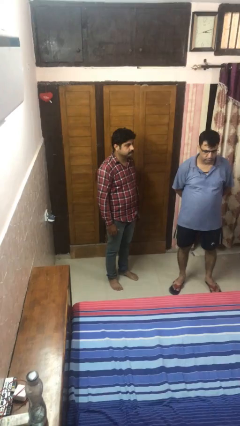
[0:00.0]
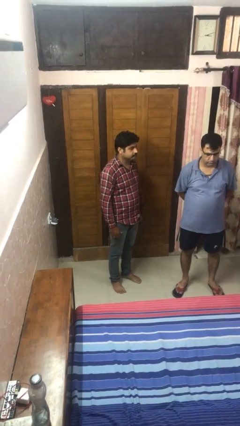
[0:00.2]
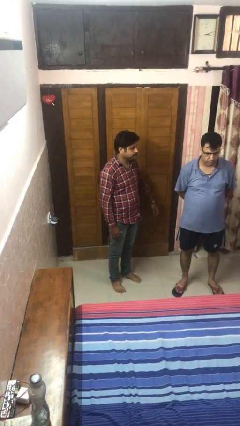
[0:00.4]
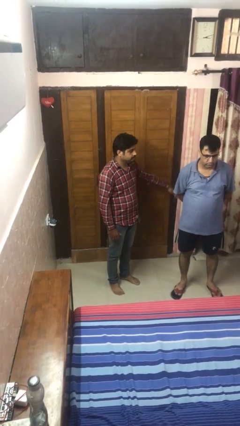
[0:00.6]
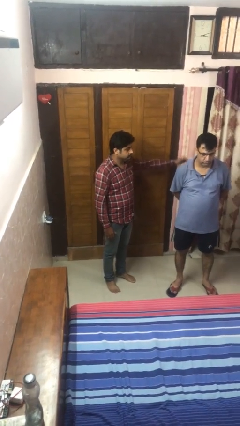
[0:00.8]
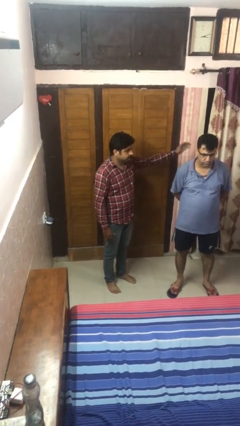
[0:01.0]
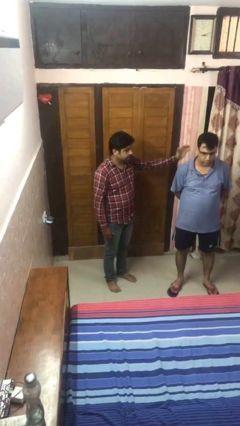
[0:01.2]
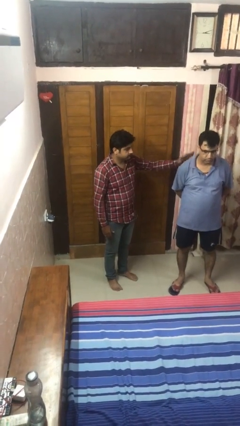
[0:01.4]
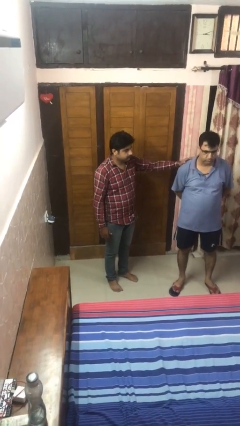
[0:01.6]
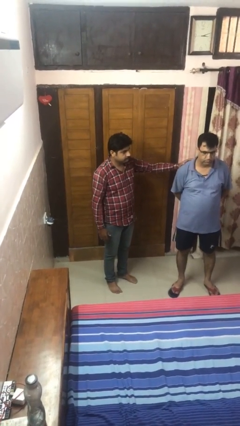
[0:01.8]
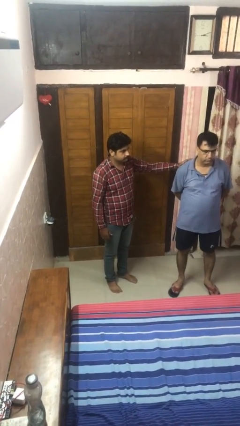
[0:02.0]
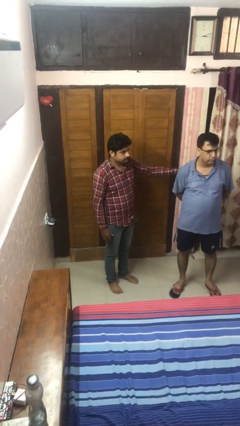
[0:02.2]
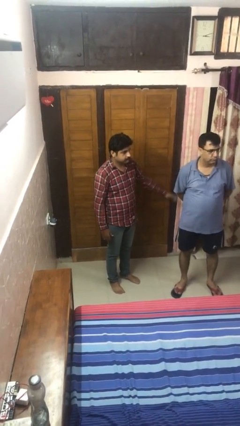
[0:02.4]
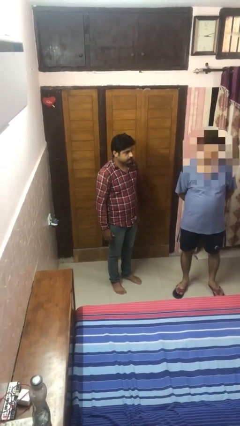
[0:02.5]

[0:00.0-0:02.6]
person pounds shoulders of person

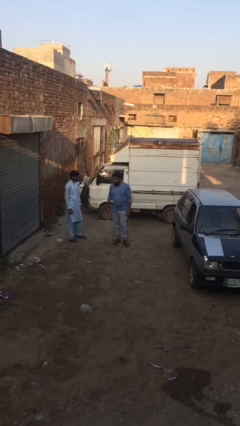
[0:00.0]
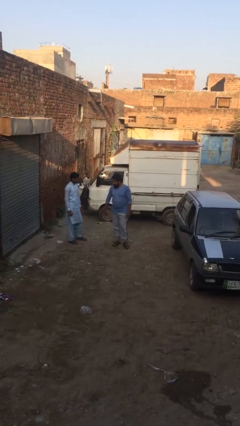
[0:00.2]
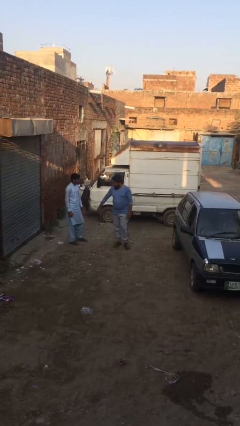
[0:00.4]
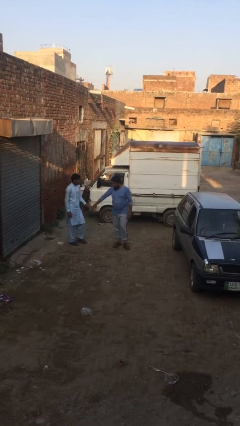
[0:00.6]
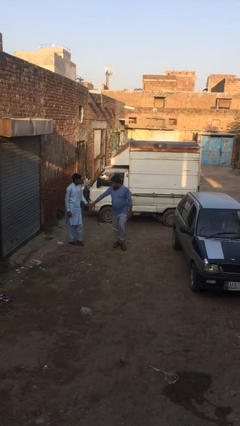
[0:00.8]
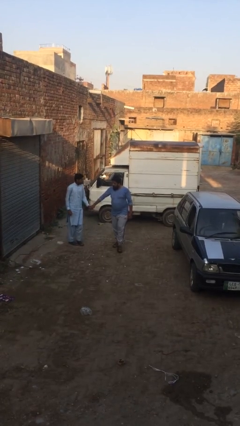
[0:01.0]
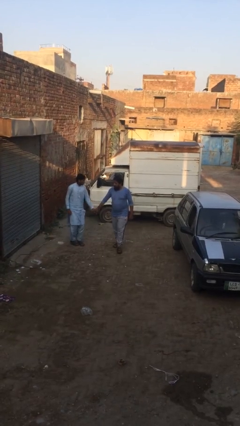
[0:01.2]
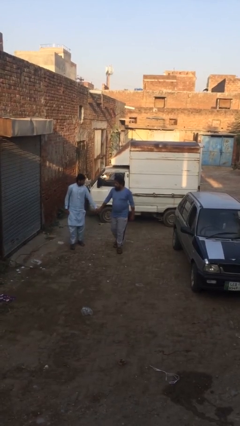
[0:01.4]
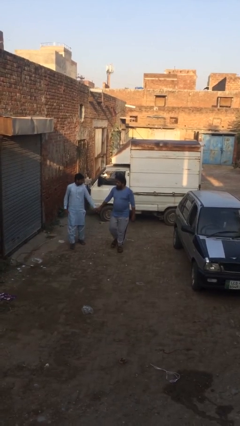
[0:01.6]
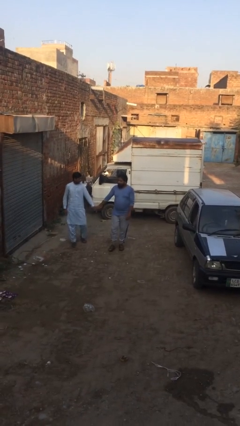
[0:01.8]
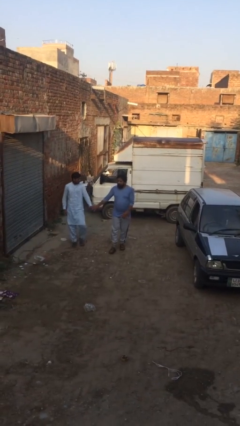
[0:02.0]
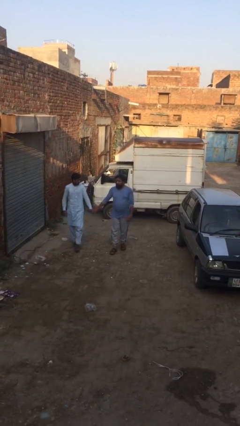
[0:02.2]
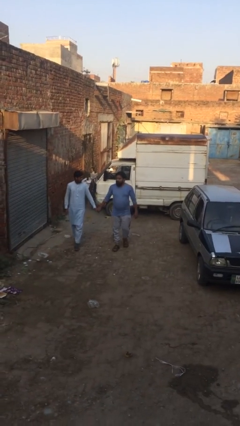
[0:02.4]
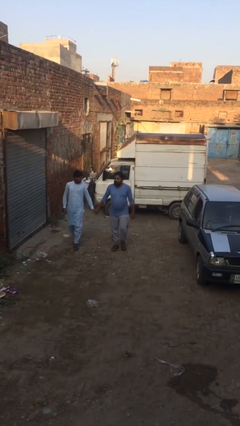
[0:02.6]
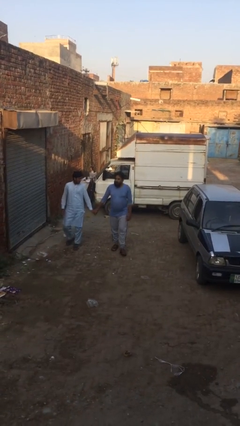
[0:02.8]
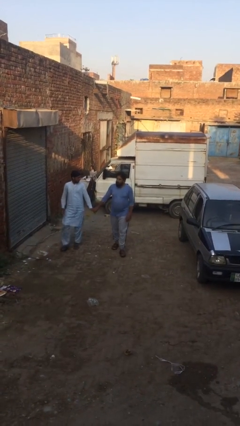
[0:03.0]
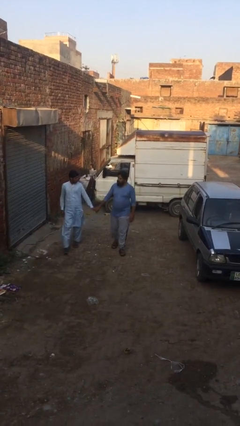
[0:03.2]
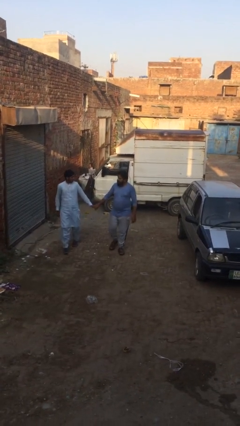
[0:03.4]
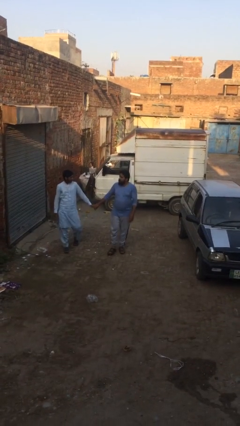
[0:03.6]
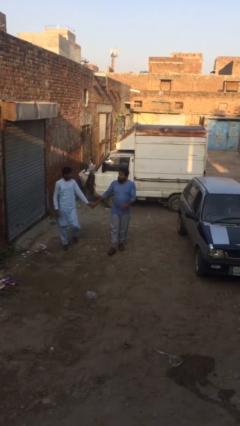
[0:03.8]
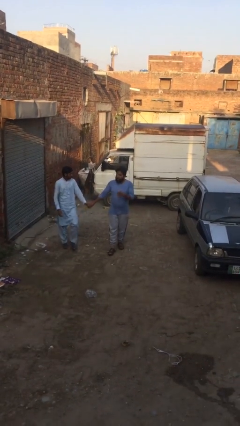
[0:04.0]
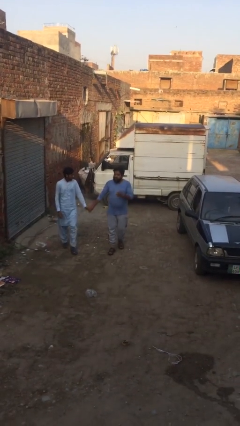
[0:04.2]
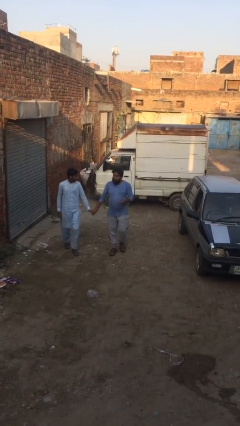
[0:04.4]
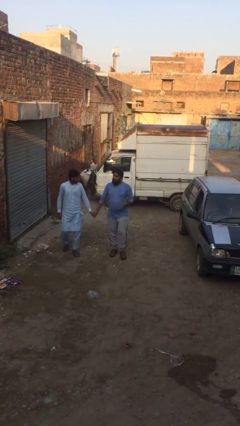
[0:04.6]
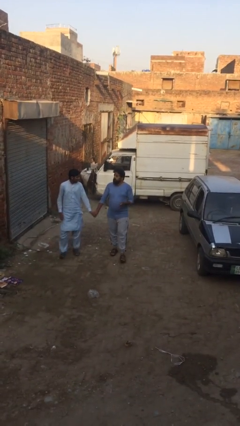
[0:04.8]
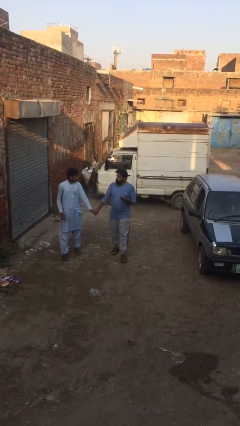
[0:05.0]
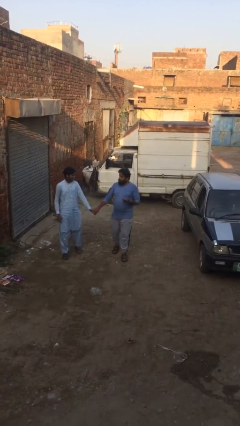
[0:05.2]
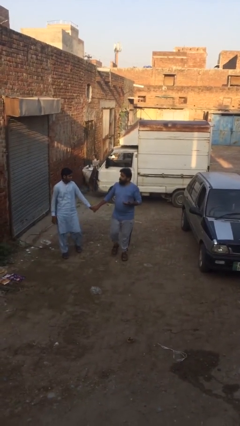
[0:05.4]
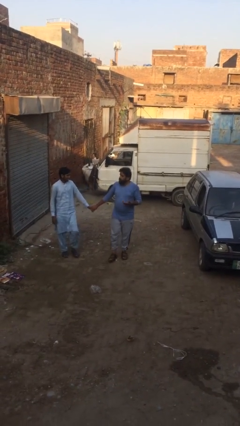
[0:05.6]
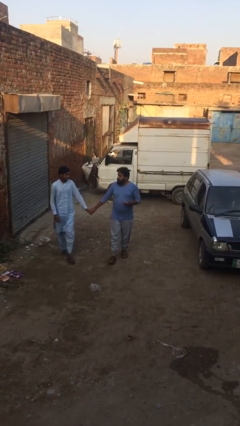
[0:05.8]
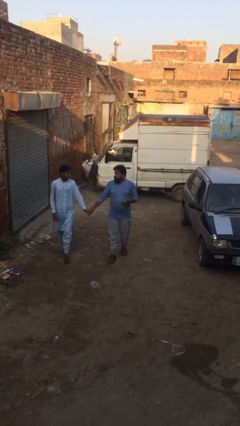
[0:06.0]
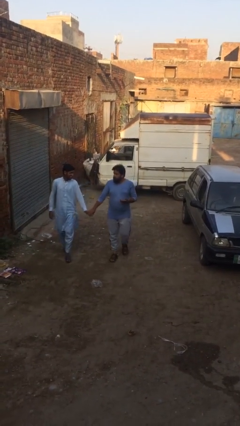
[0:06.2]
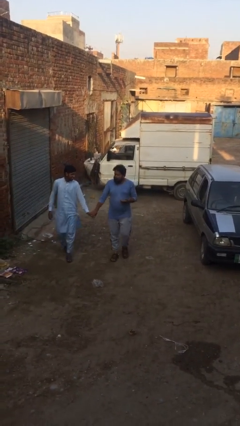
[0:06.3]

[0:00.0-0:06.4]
person holds hand

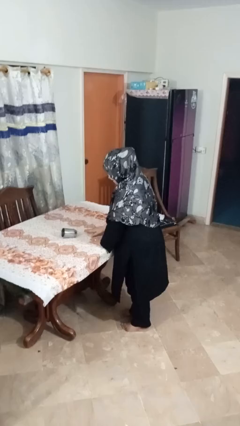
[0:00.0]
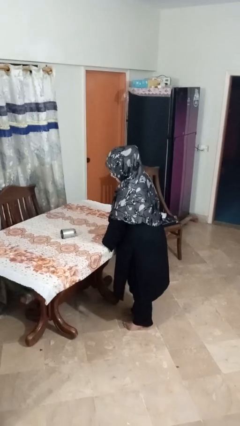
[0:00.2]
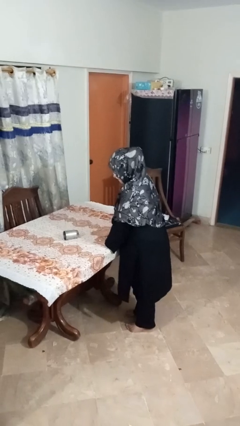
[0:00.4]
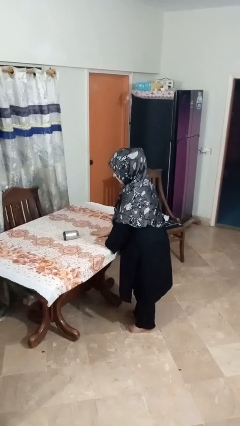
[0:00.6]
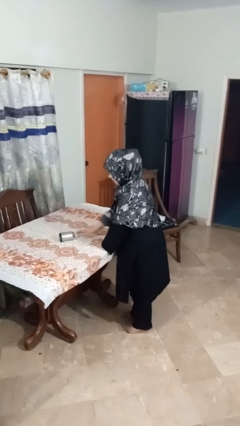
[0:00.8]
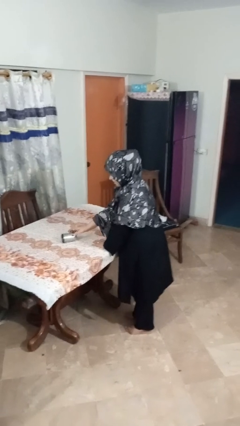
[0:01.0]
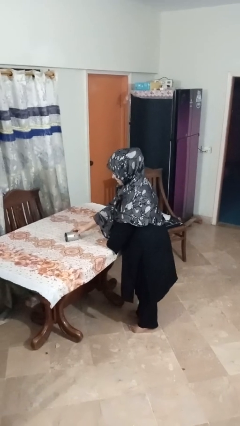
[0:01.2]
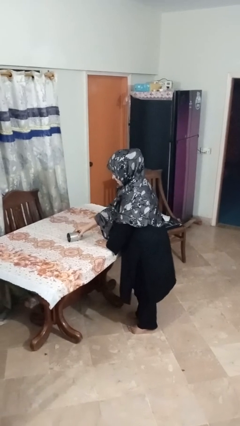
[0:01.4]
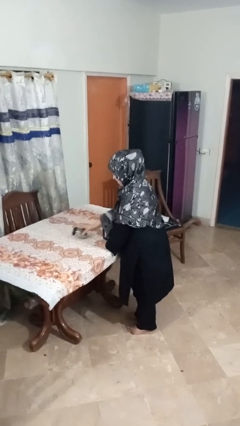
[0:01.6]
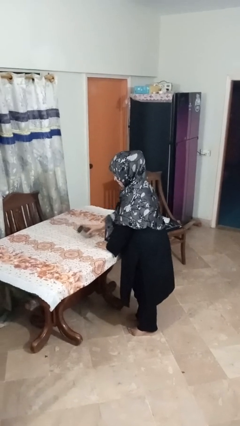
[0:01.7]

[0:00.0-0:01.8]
person knocks over glass

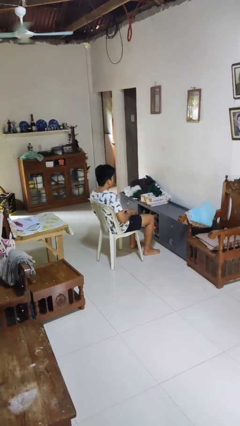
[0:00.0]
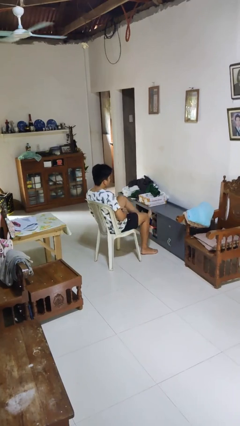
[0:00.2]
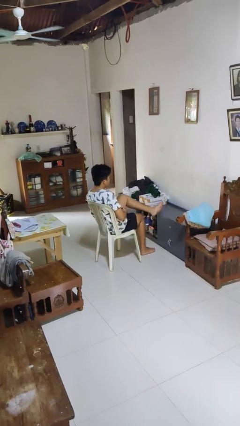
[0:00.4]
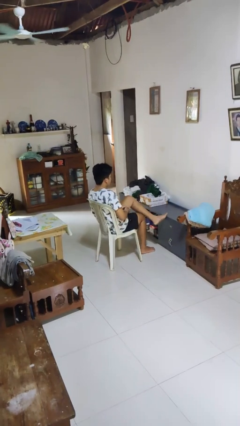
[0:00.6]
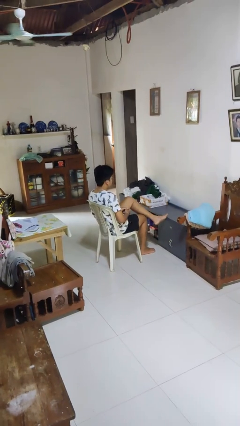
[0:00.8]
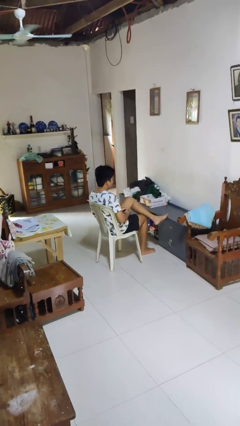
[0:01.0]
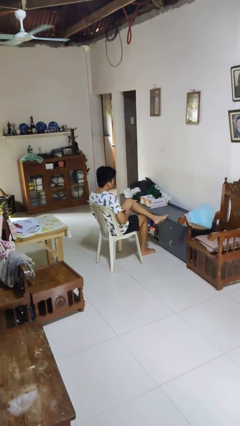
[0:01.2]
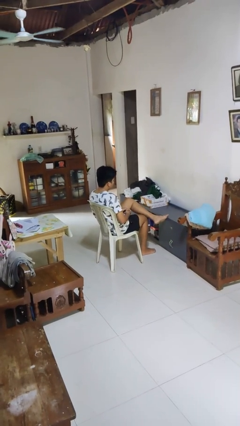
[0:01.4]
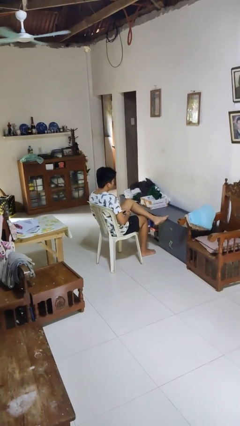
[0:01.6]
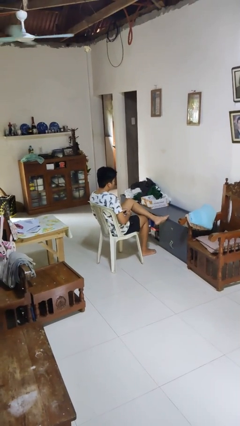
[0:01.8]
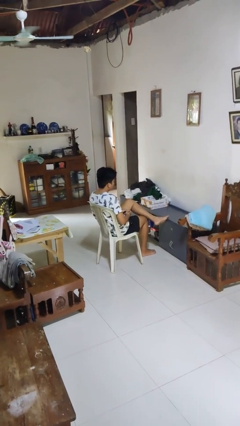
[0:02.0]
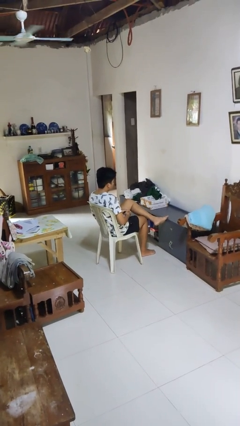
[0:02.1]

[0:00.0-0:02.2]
person crosses legs

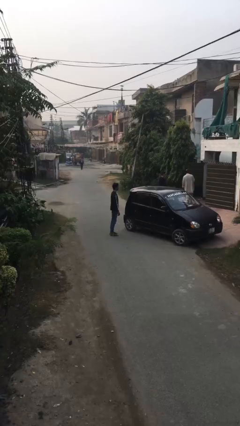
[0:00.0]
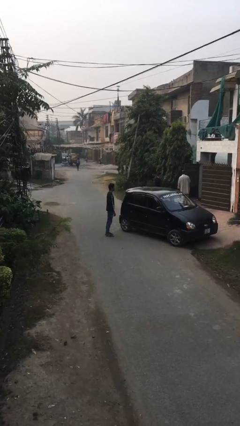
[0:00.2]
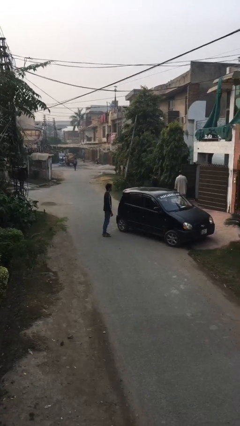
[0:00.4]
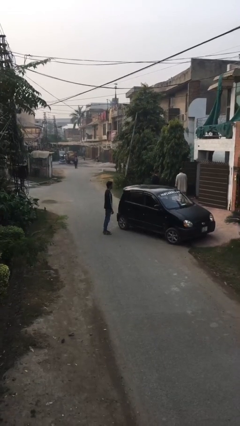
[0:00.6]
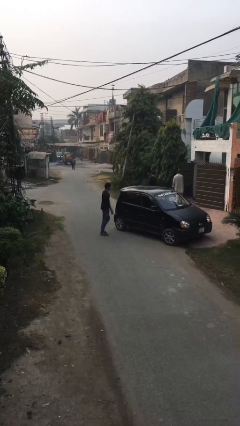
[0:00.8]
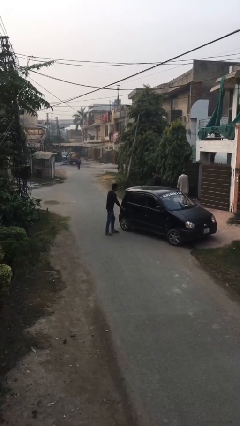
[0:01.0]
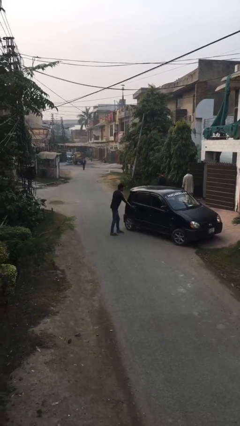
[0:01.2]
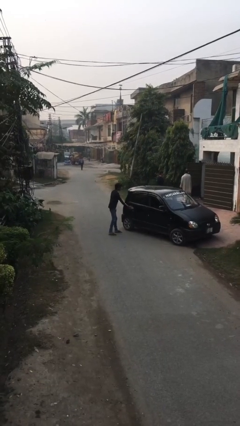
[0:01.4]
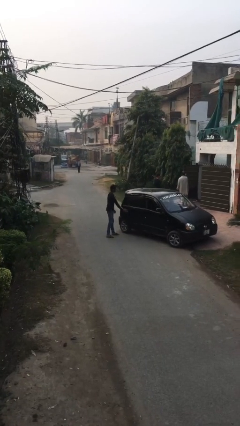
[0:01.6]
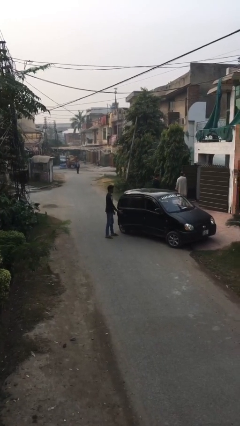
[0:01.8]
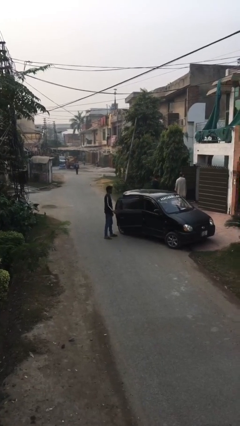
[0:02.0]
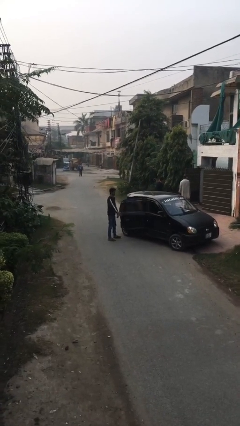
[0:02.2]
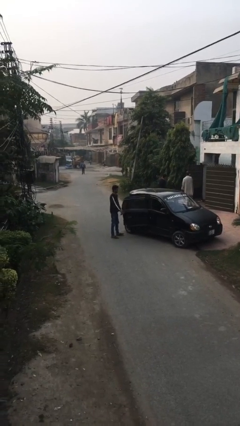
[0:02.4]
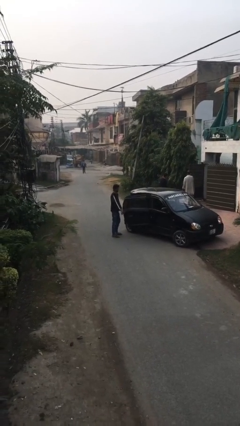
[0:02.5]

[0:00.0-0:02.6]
person opens car door

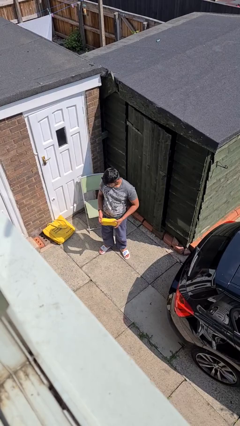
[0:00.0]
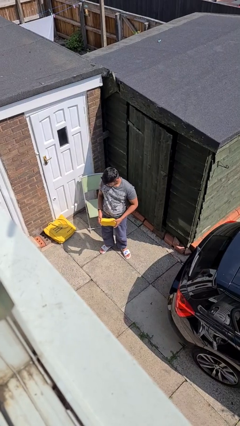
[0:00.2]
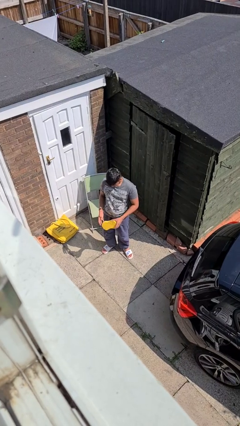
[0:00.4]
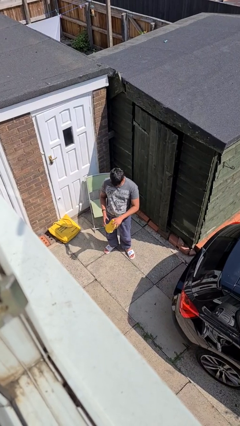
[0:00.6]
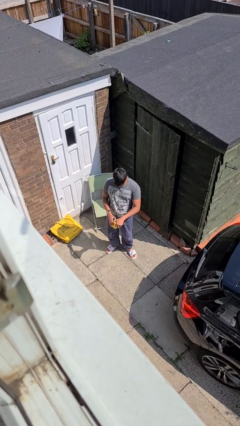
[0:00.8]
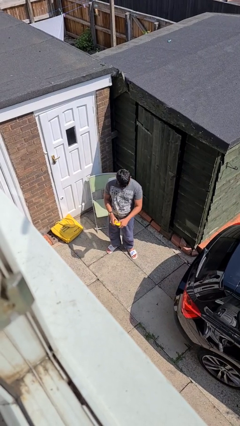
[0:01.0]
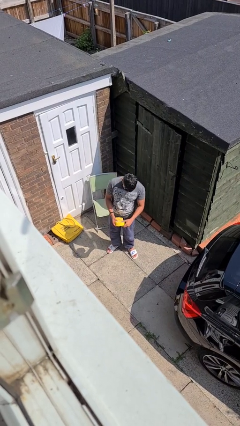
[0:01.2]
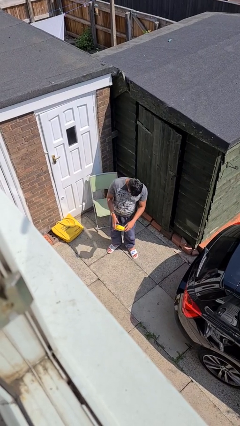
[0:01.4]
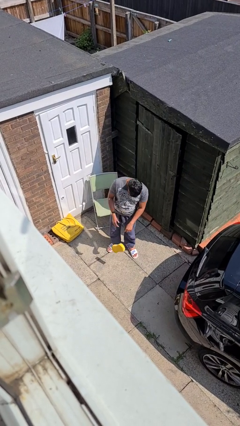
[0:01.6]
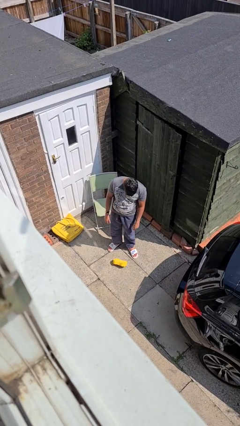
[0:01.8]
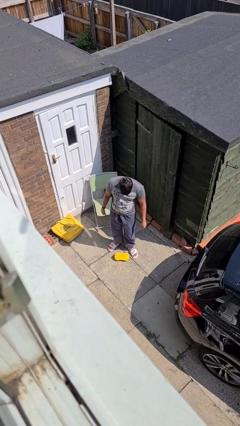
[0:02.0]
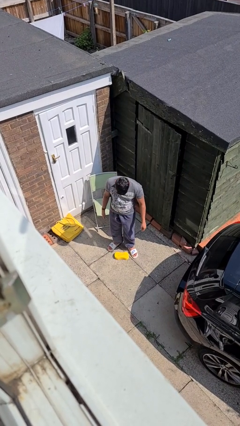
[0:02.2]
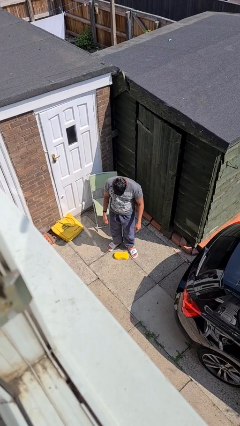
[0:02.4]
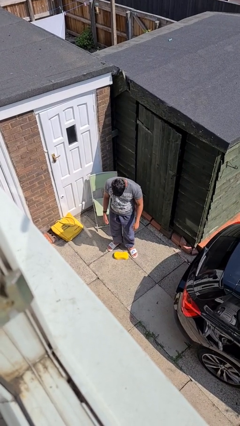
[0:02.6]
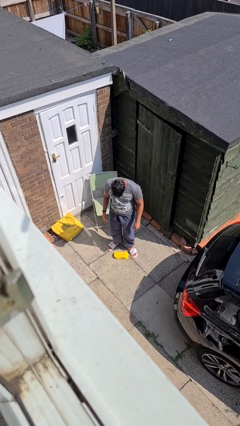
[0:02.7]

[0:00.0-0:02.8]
person drops object
